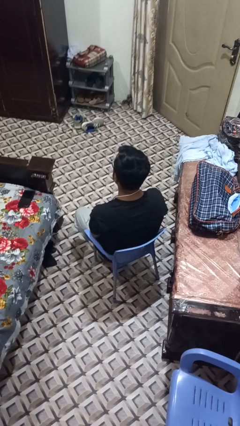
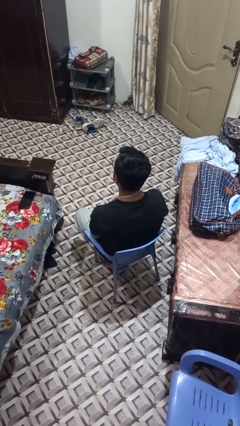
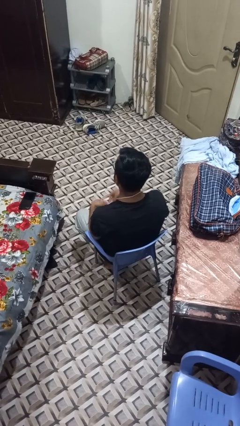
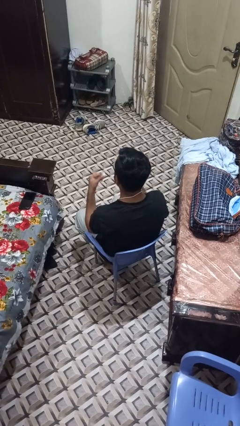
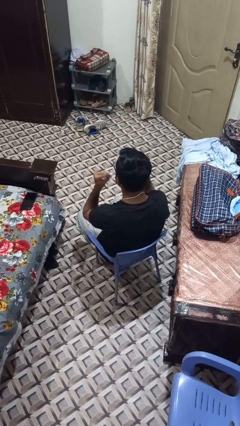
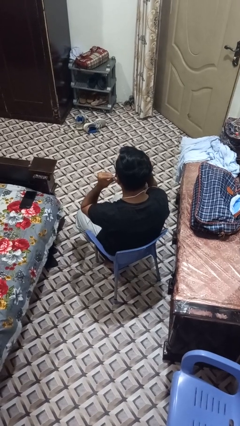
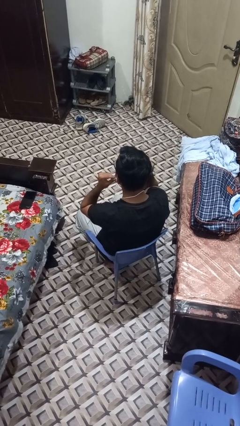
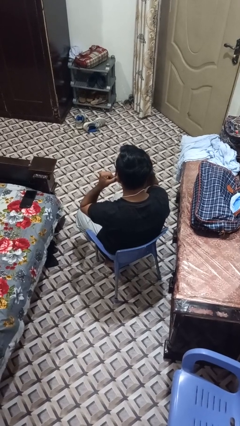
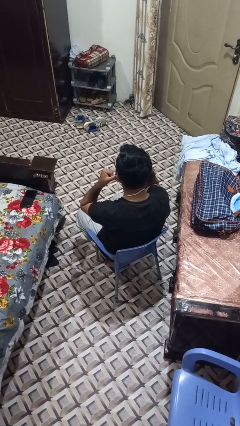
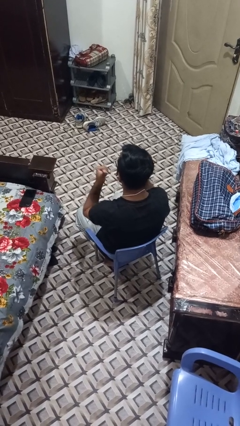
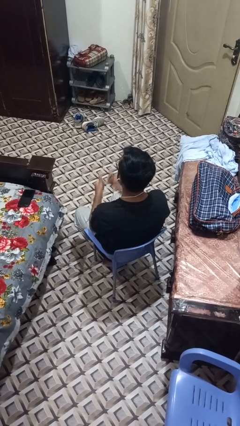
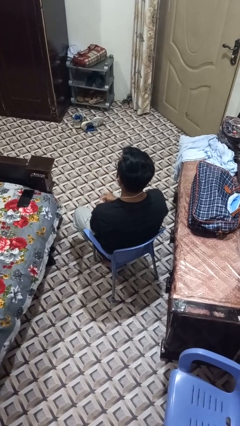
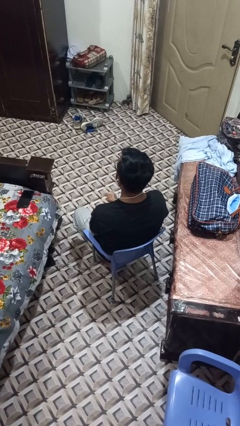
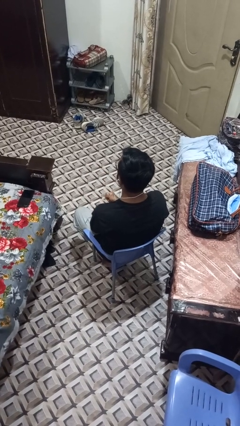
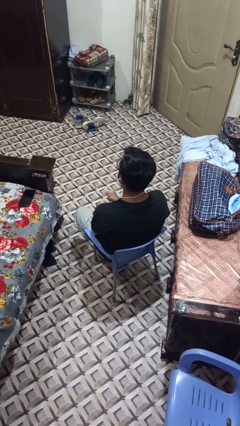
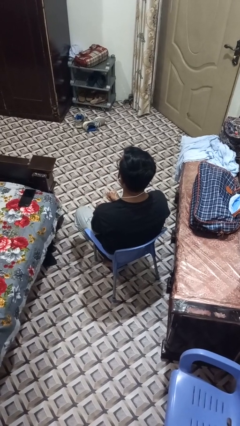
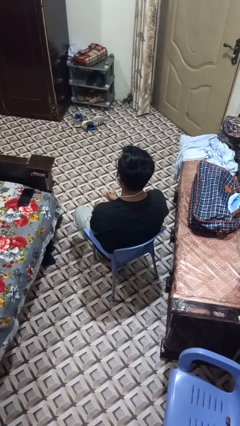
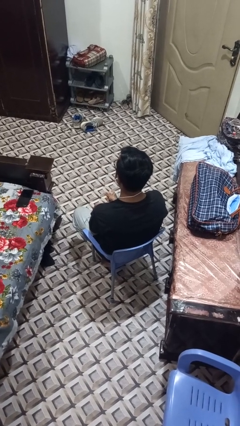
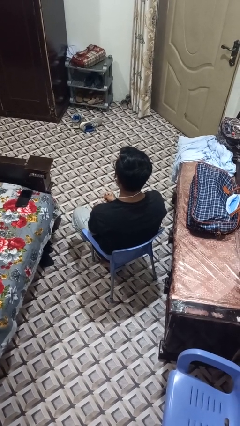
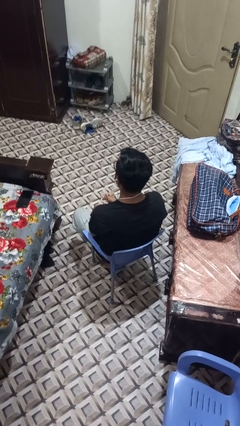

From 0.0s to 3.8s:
person puts on headphones

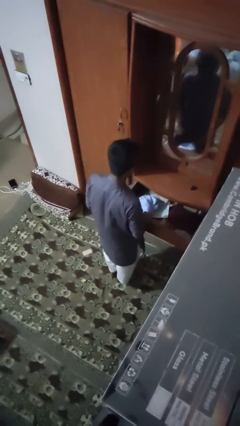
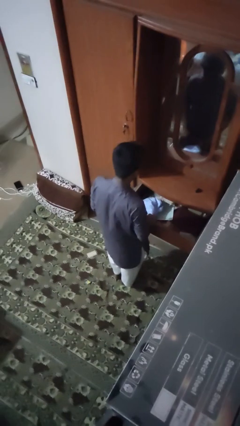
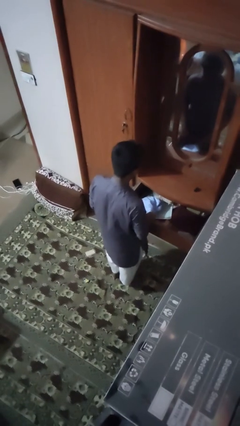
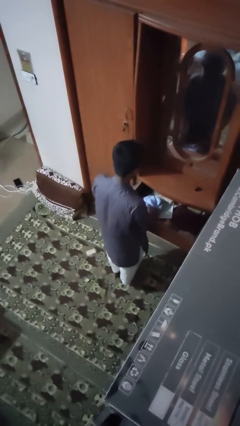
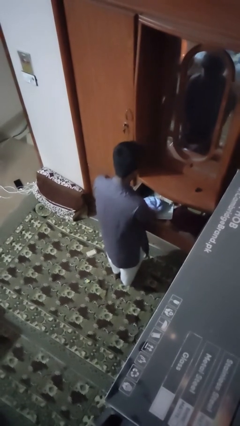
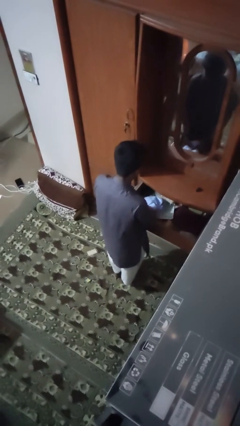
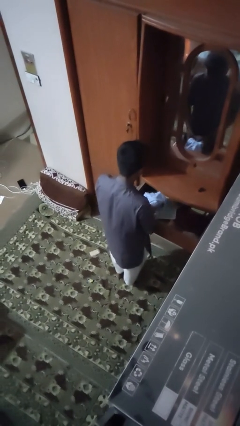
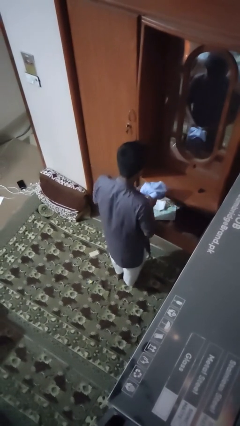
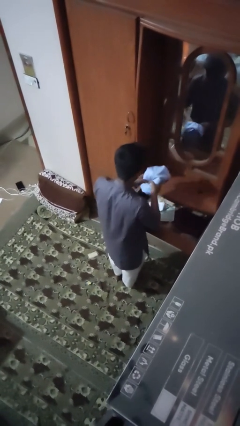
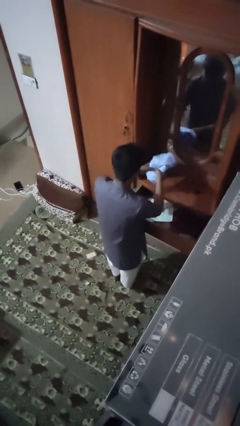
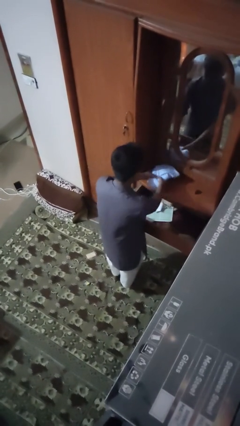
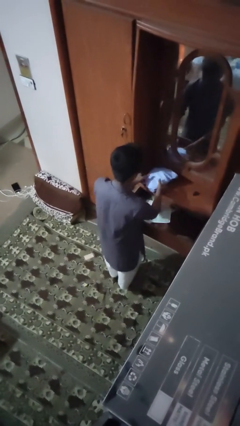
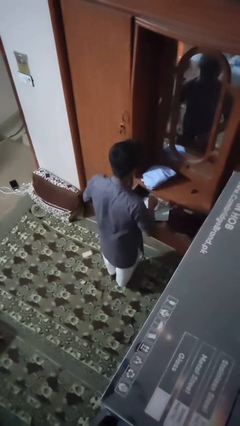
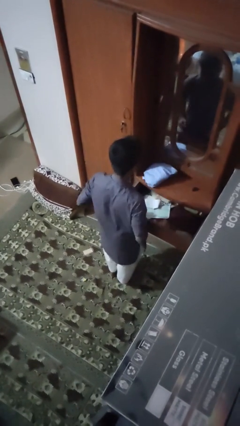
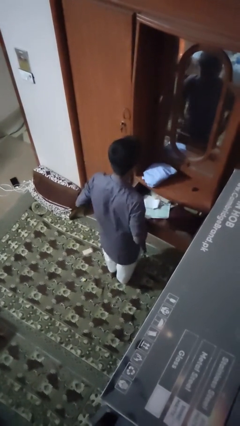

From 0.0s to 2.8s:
person takes clothes from dresser

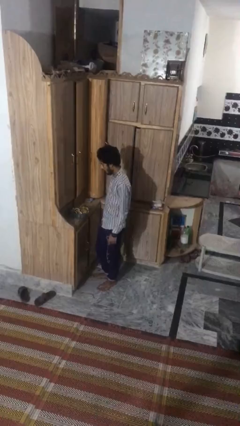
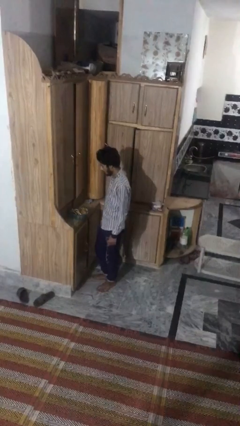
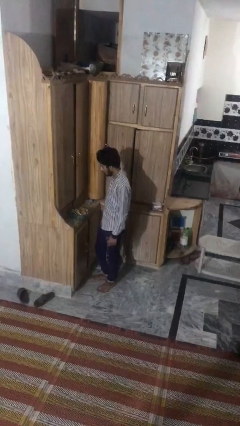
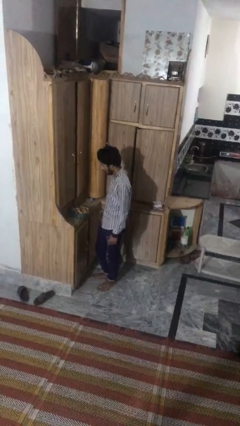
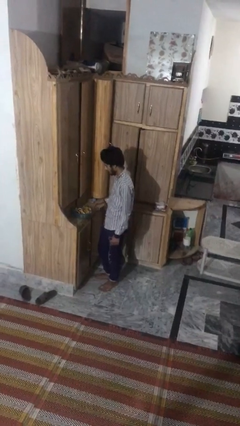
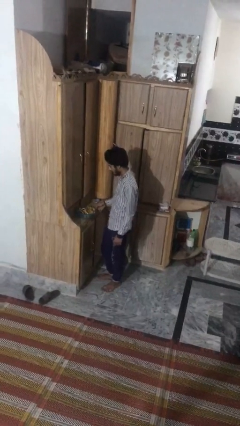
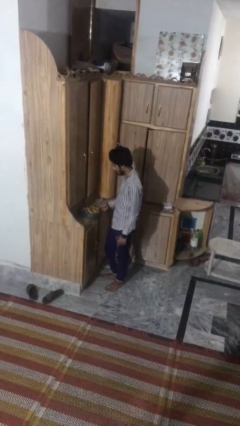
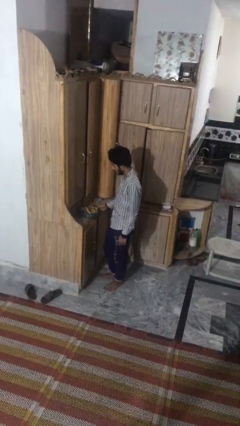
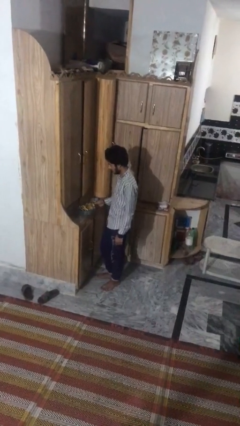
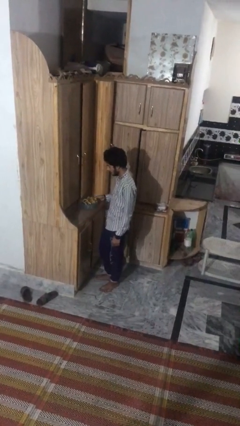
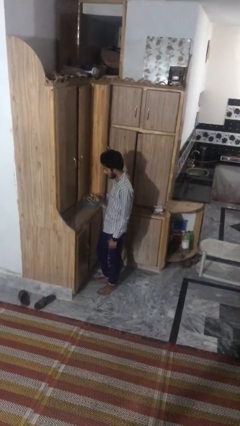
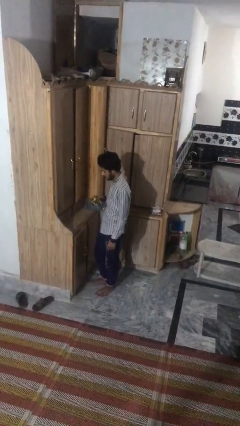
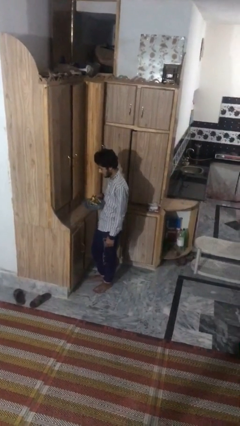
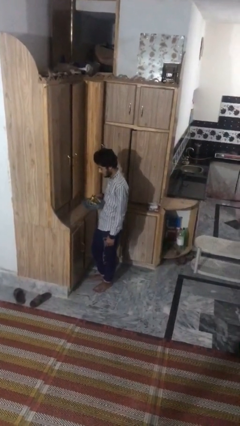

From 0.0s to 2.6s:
person picks up object from countertop

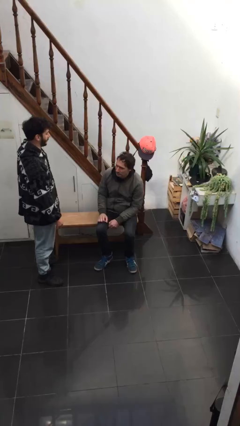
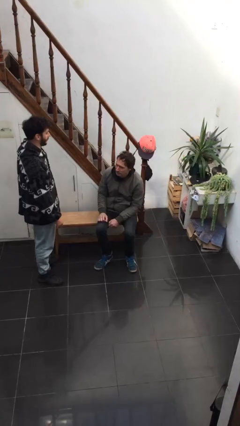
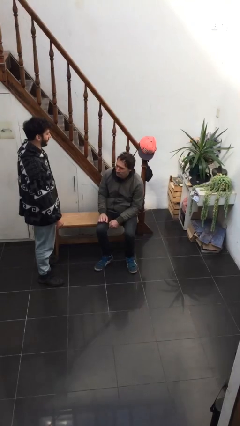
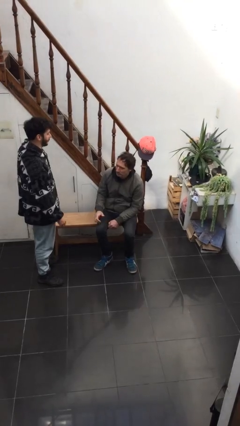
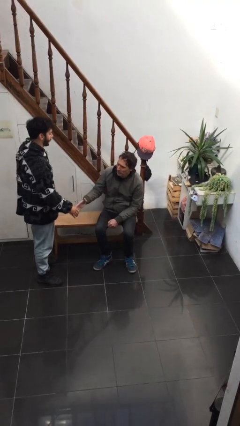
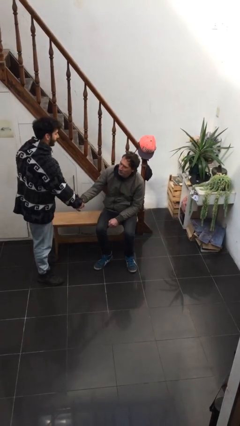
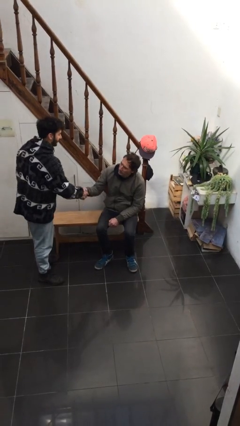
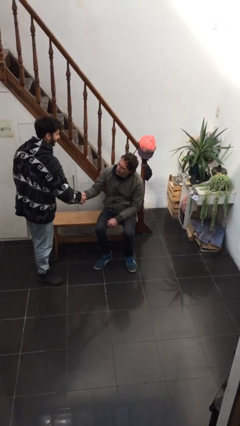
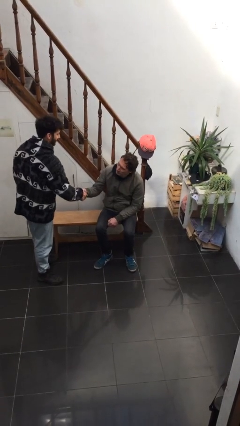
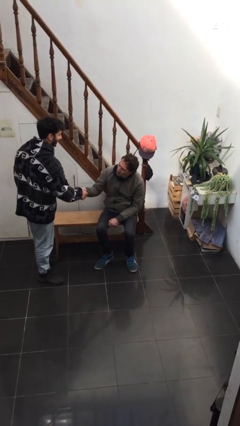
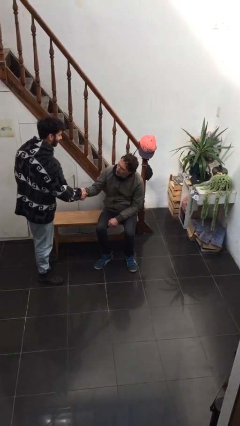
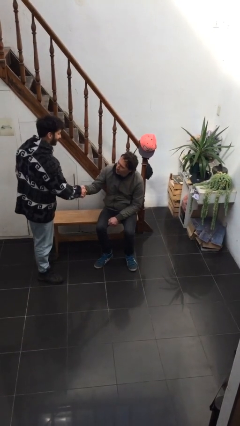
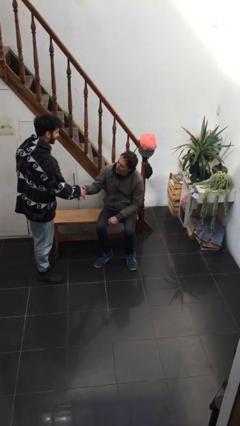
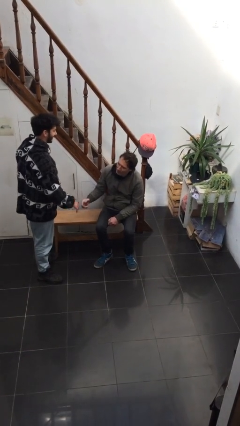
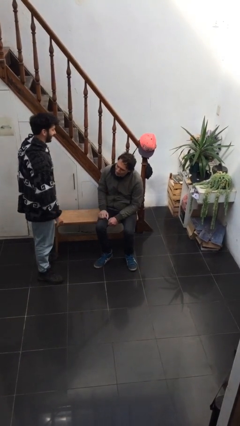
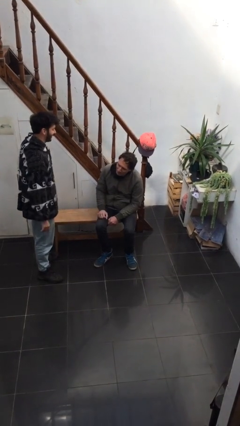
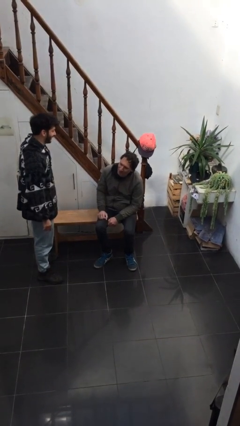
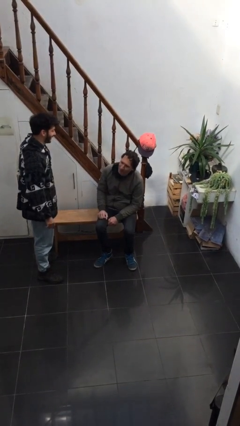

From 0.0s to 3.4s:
person shakes hand

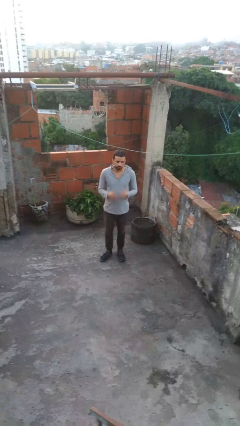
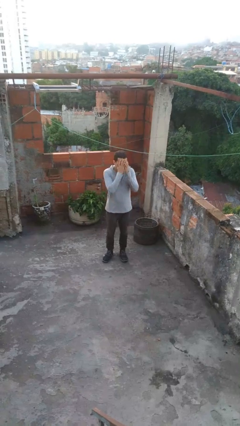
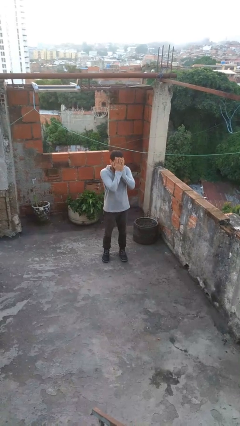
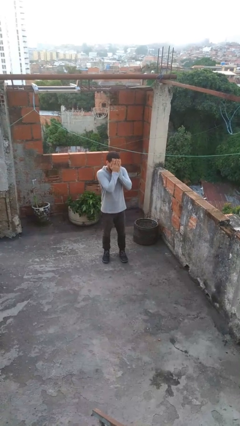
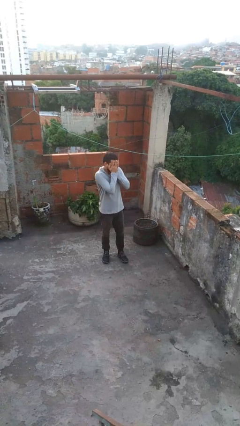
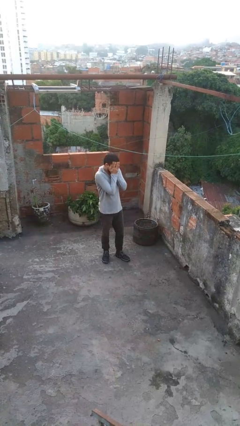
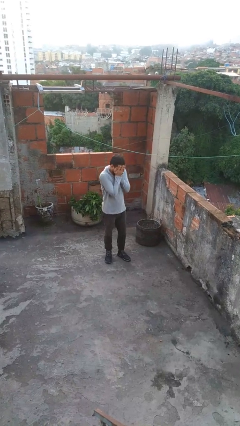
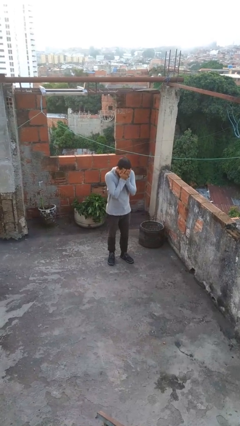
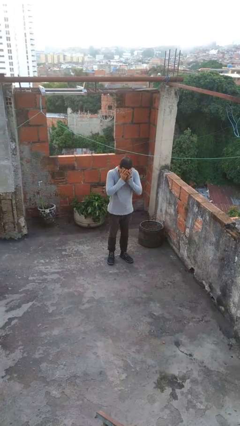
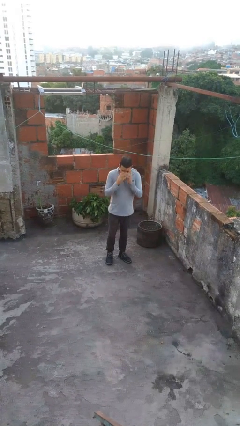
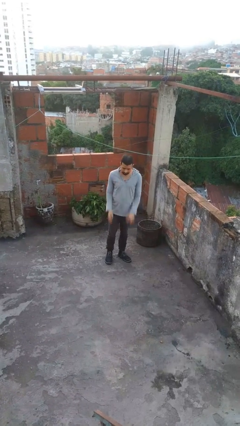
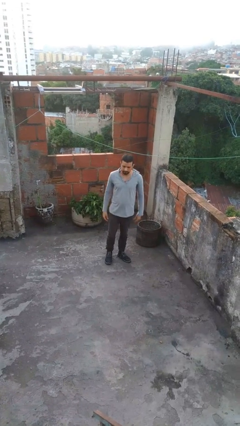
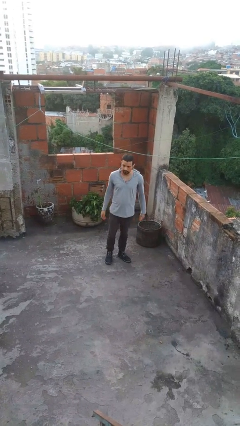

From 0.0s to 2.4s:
person covers face with hands

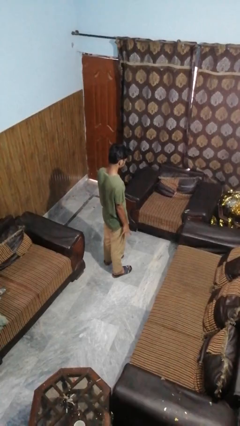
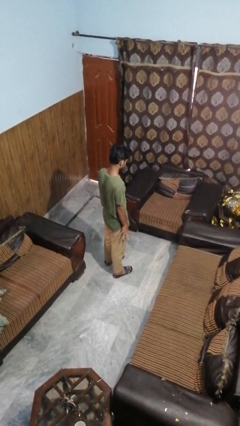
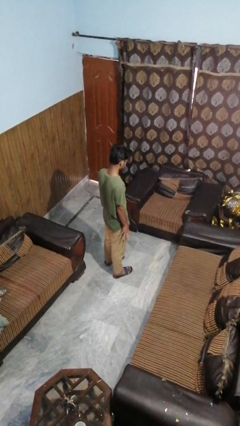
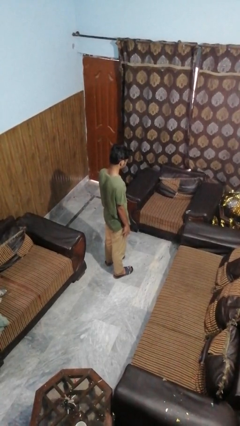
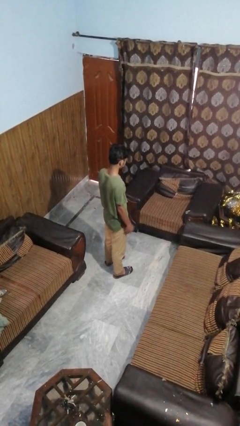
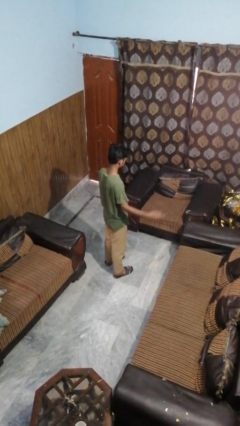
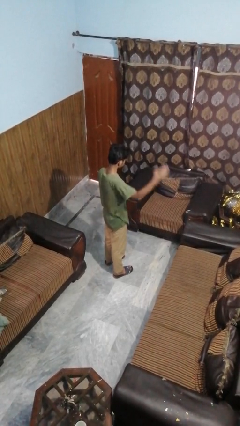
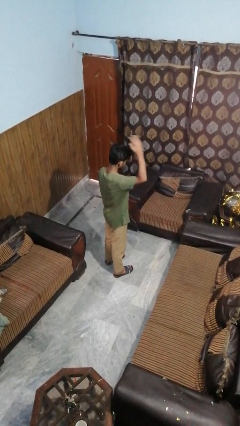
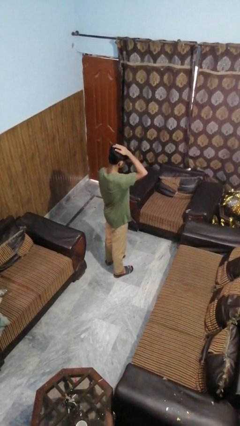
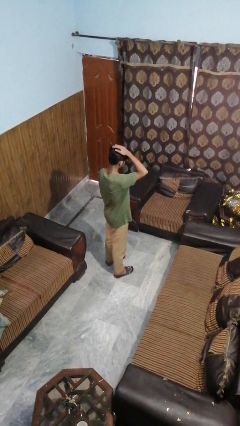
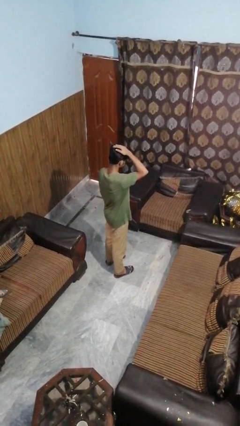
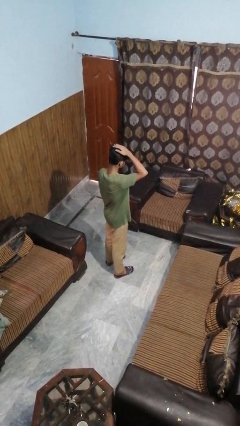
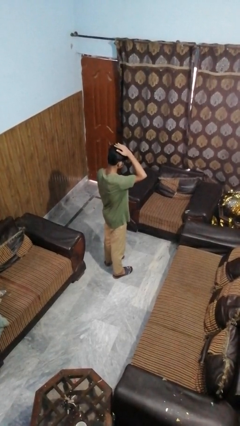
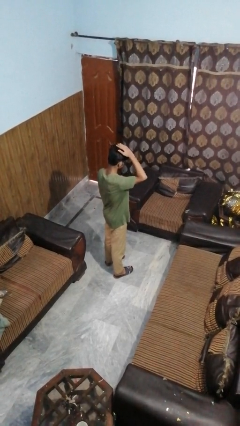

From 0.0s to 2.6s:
person pats head
